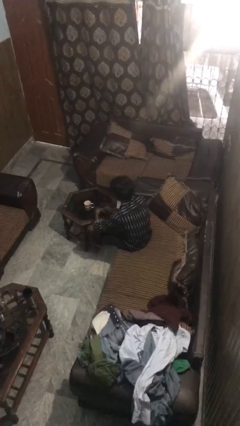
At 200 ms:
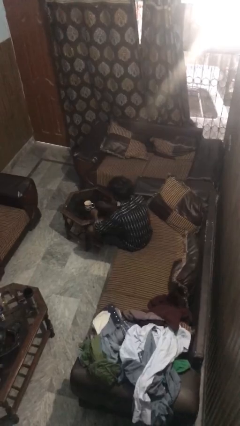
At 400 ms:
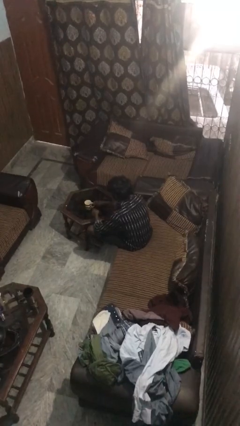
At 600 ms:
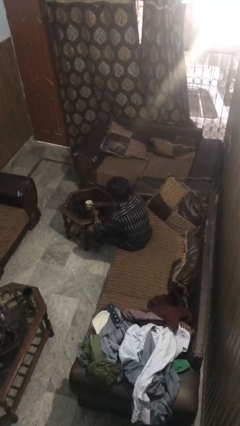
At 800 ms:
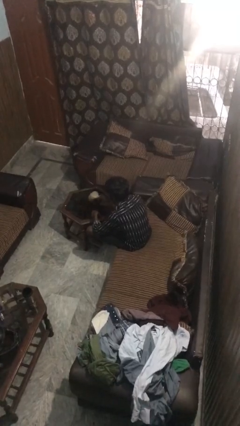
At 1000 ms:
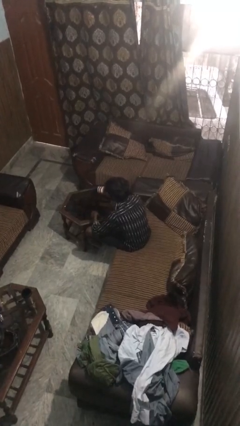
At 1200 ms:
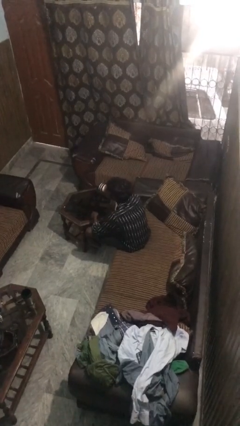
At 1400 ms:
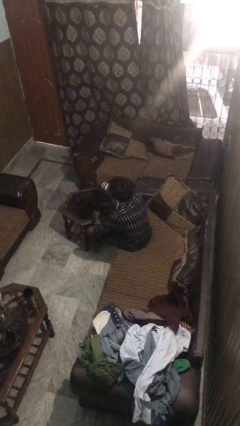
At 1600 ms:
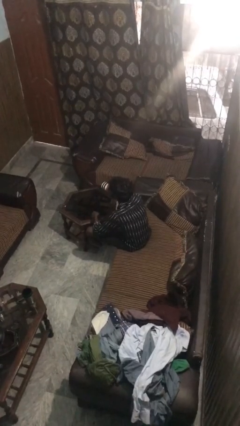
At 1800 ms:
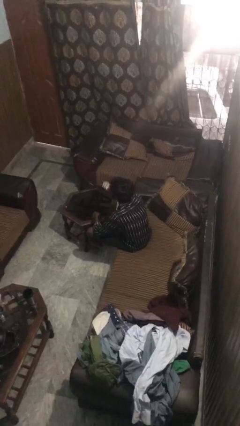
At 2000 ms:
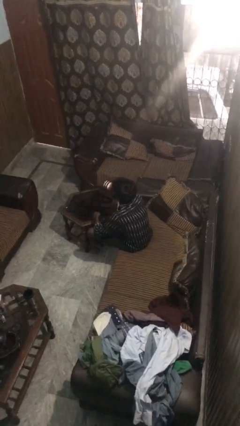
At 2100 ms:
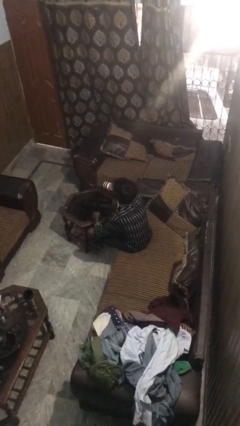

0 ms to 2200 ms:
person drinks from cup

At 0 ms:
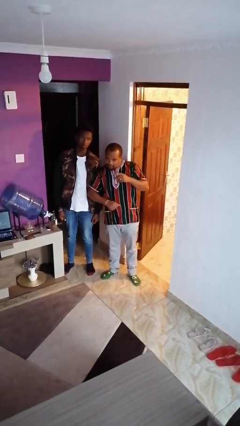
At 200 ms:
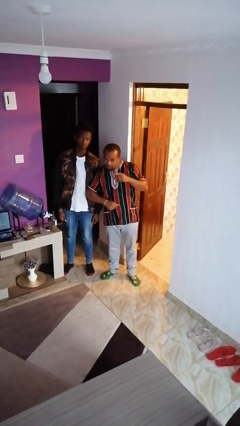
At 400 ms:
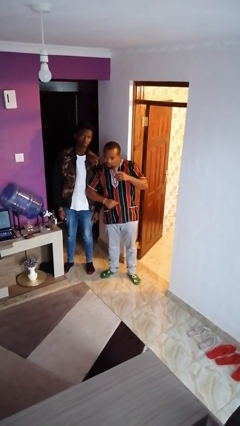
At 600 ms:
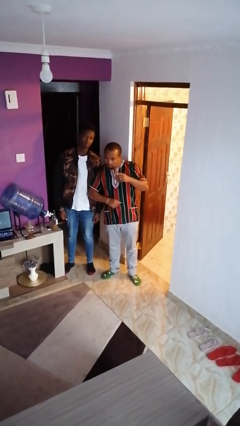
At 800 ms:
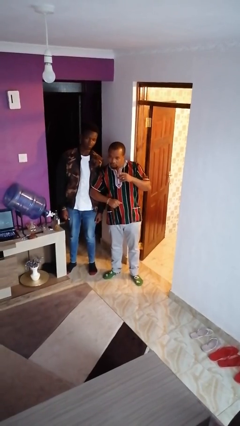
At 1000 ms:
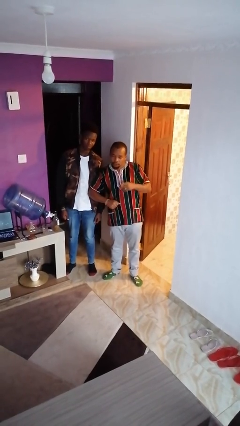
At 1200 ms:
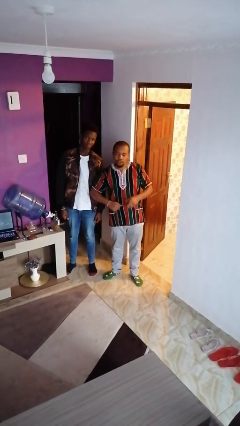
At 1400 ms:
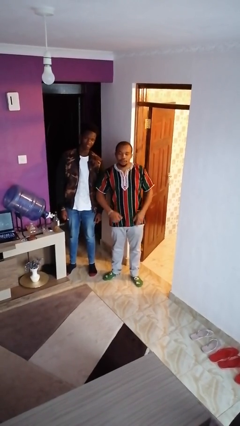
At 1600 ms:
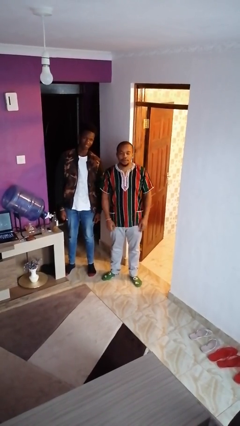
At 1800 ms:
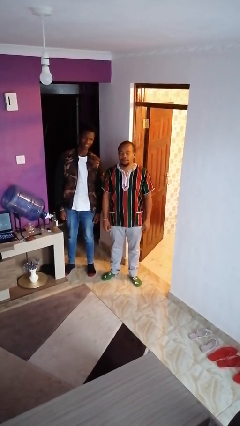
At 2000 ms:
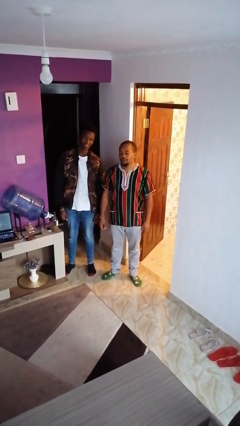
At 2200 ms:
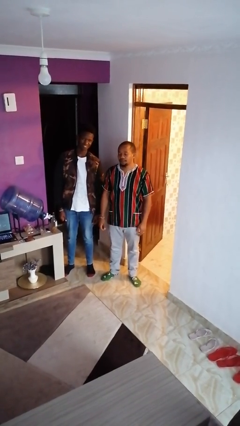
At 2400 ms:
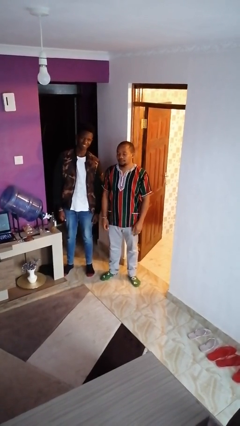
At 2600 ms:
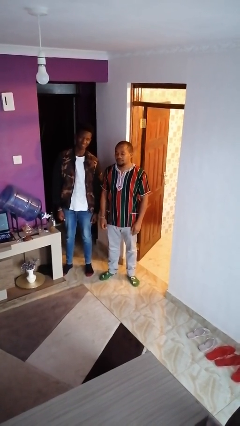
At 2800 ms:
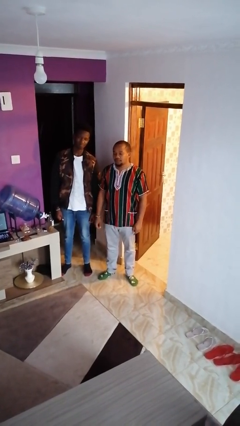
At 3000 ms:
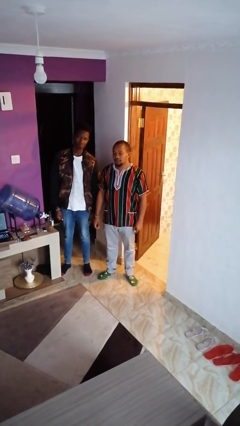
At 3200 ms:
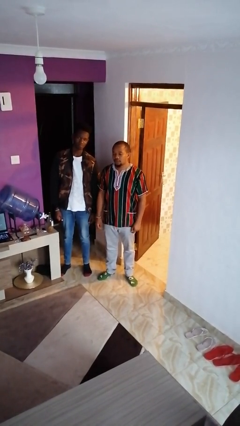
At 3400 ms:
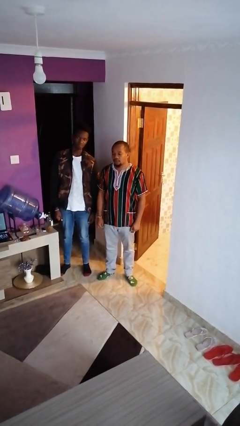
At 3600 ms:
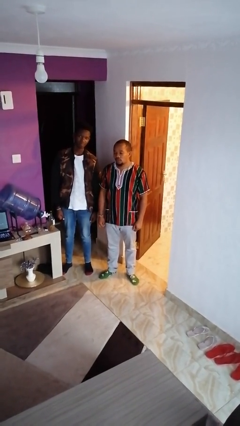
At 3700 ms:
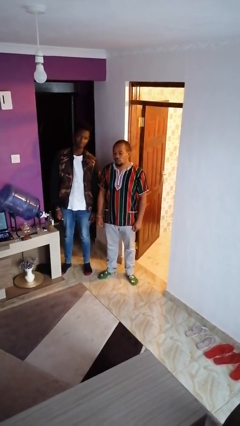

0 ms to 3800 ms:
person nudges person with elbow

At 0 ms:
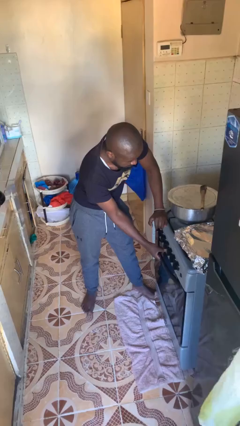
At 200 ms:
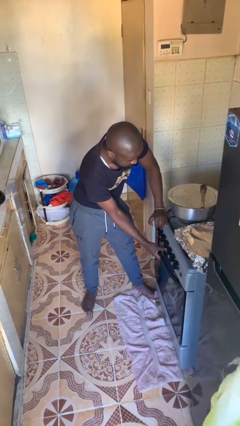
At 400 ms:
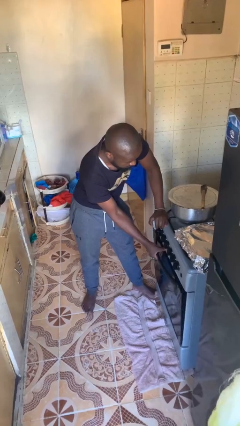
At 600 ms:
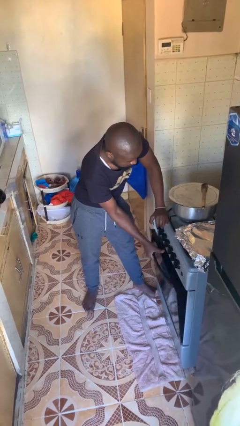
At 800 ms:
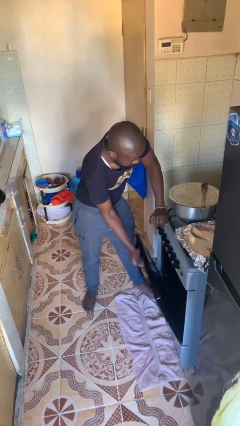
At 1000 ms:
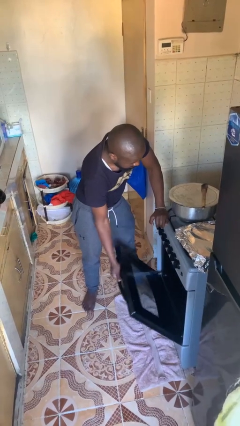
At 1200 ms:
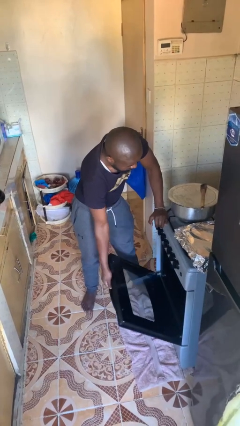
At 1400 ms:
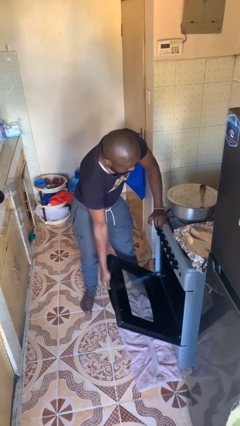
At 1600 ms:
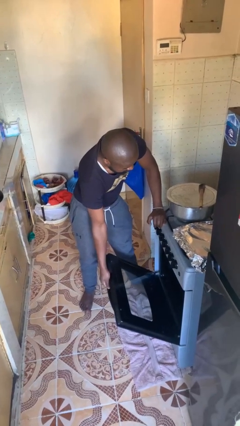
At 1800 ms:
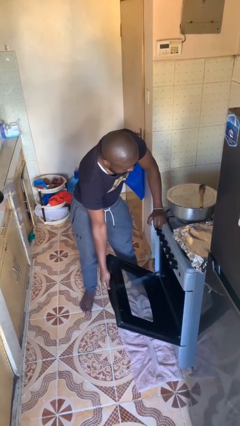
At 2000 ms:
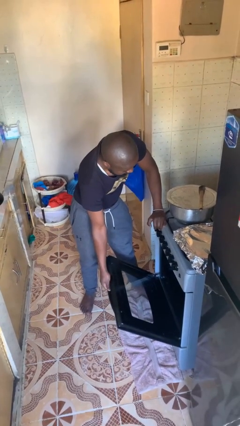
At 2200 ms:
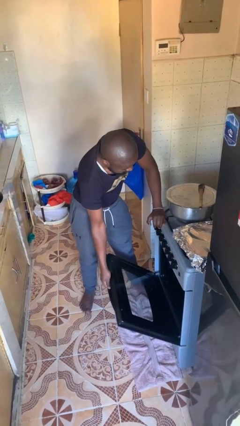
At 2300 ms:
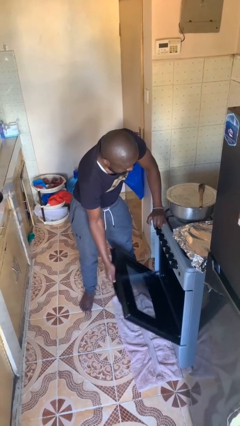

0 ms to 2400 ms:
person opens oven door

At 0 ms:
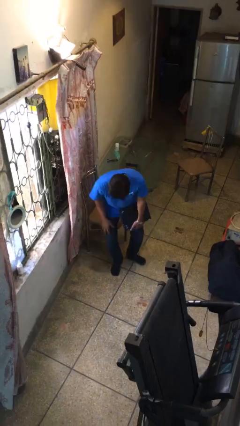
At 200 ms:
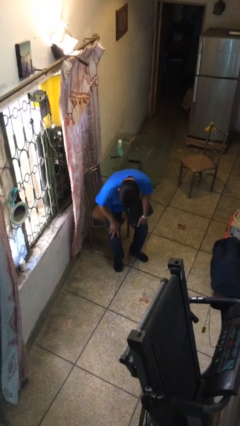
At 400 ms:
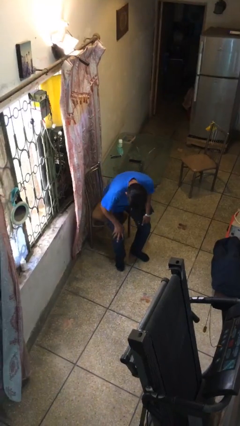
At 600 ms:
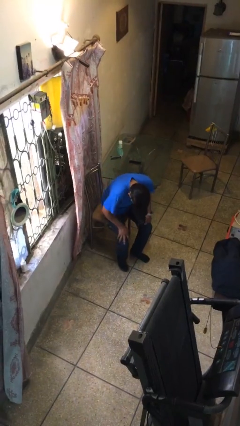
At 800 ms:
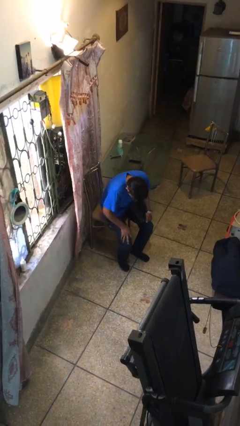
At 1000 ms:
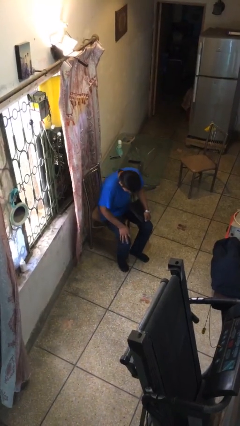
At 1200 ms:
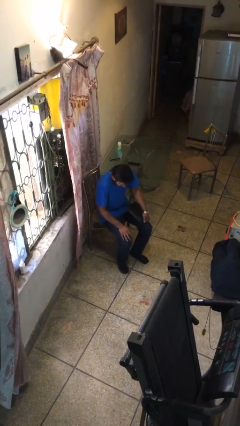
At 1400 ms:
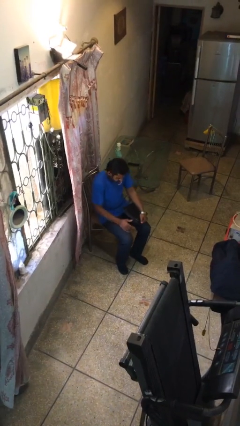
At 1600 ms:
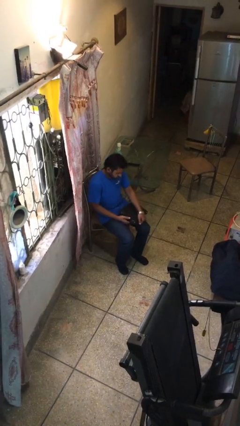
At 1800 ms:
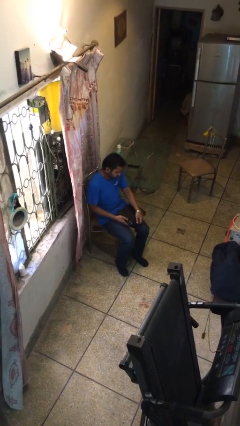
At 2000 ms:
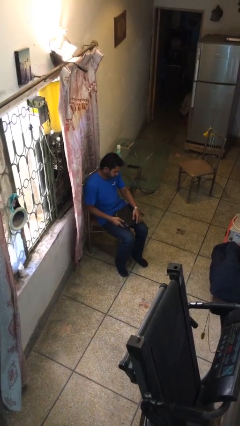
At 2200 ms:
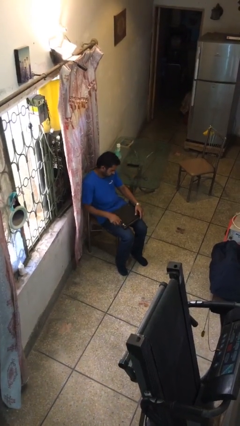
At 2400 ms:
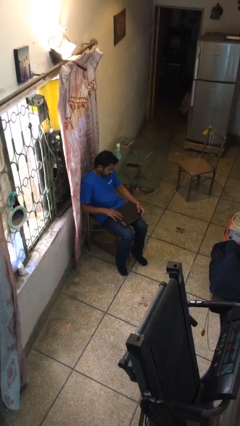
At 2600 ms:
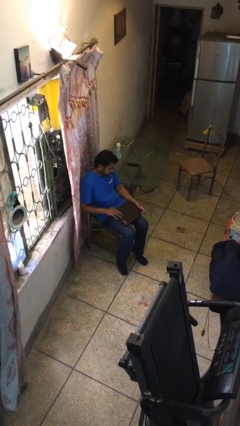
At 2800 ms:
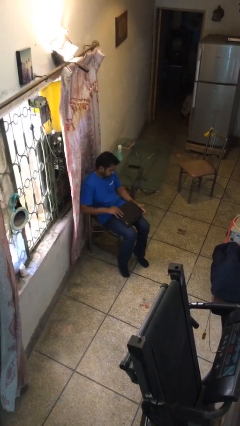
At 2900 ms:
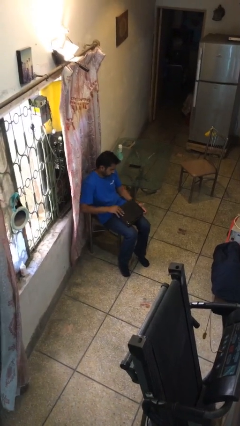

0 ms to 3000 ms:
person sits down

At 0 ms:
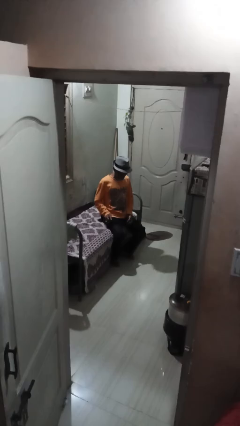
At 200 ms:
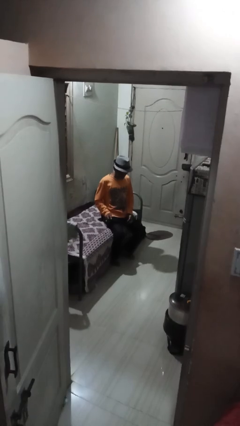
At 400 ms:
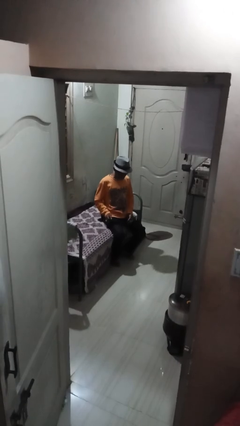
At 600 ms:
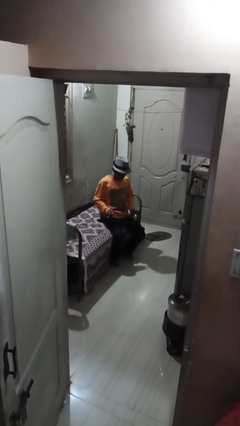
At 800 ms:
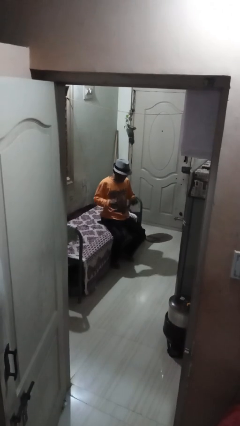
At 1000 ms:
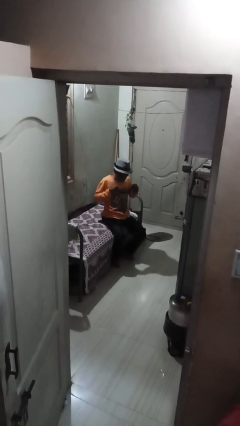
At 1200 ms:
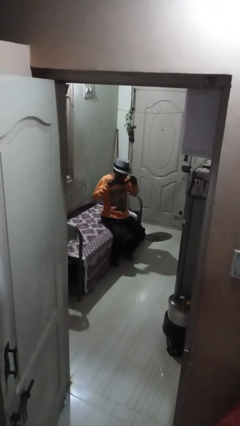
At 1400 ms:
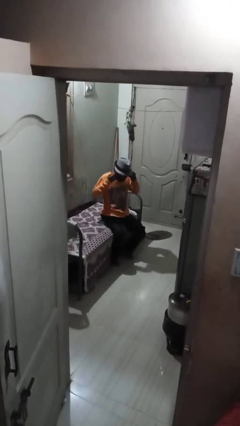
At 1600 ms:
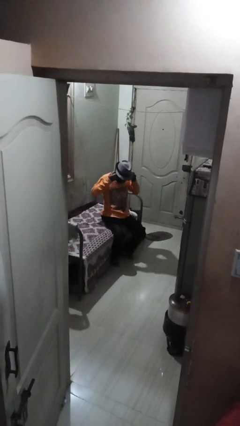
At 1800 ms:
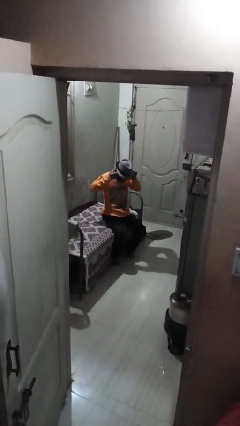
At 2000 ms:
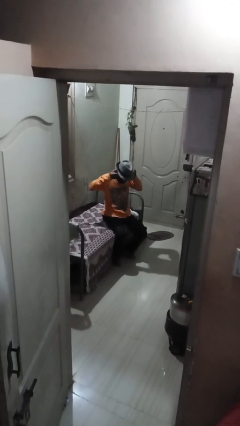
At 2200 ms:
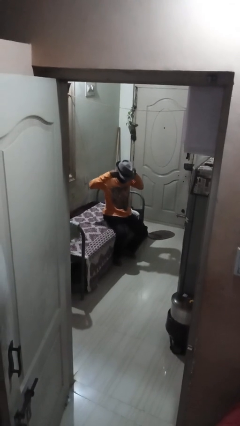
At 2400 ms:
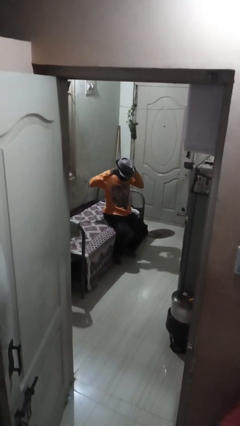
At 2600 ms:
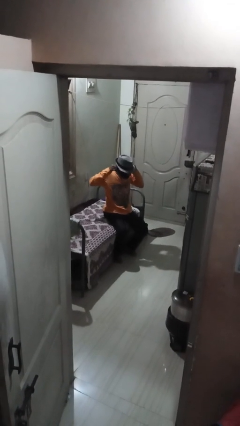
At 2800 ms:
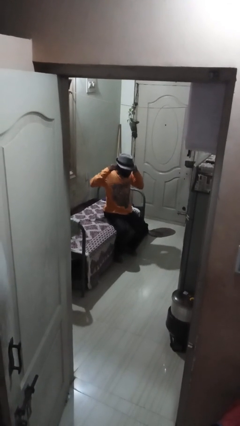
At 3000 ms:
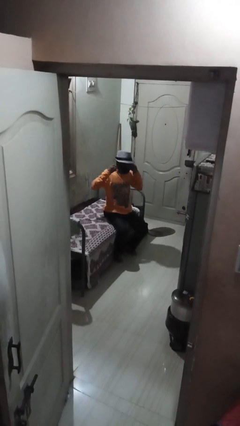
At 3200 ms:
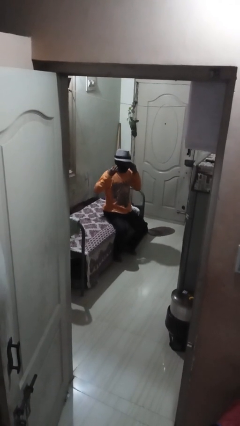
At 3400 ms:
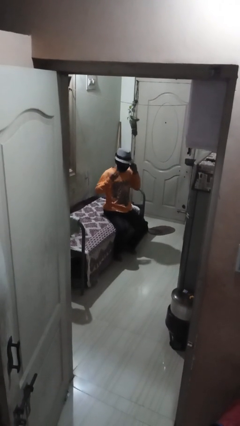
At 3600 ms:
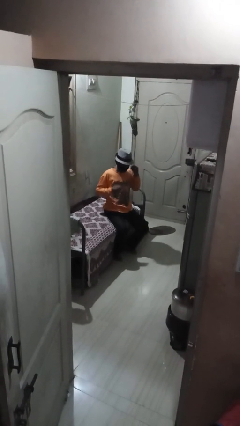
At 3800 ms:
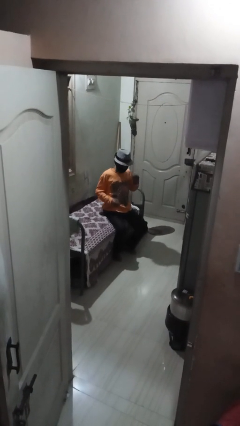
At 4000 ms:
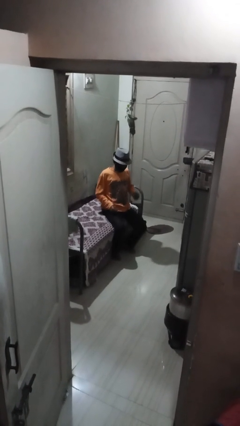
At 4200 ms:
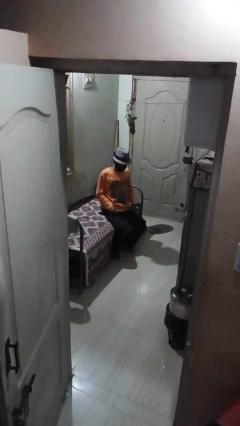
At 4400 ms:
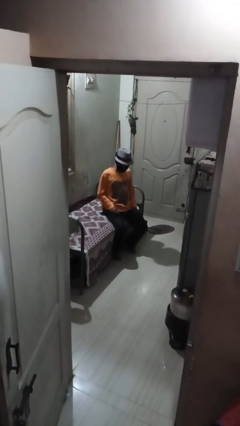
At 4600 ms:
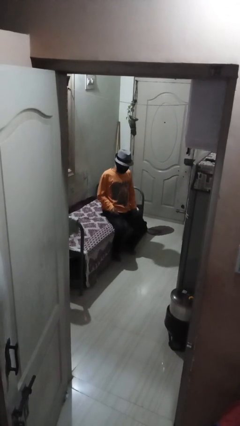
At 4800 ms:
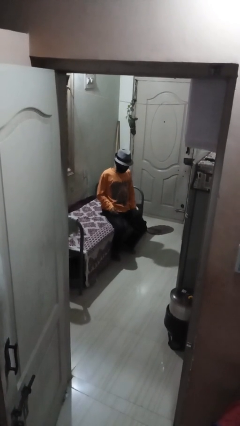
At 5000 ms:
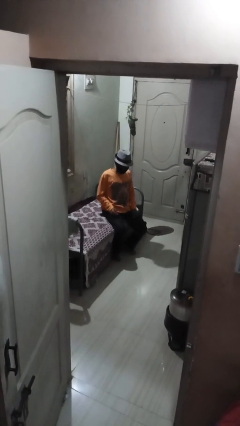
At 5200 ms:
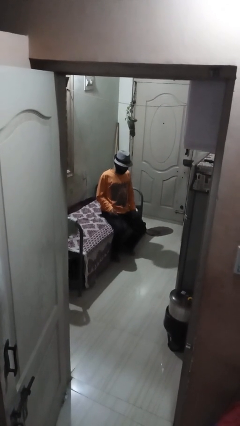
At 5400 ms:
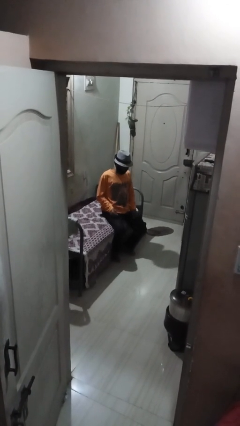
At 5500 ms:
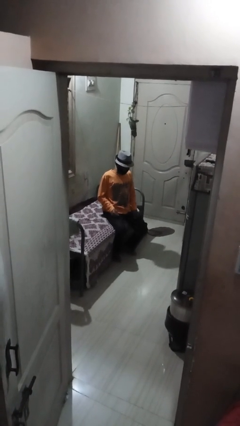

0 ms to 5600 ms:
person puts on facemask

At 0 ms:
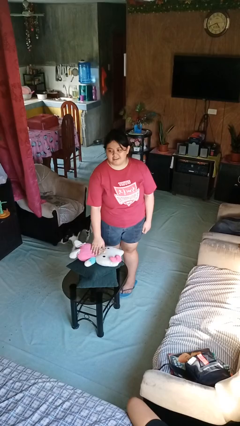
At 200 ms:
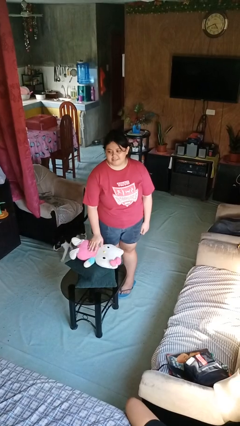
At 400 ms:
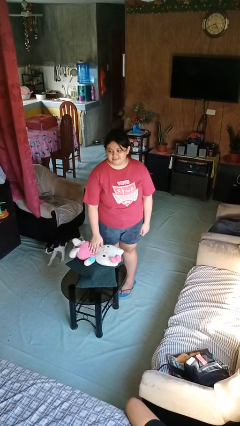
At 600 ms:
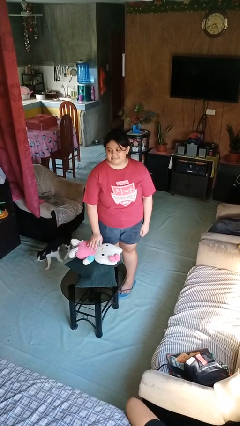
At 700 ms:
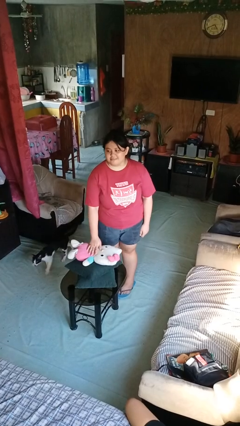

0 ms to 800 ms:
person taps object with finger
